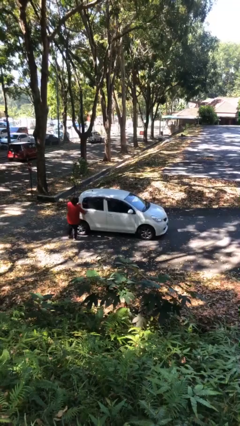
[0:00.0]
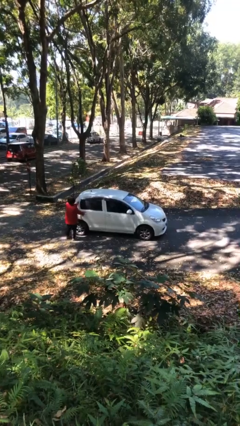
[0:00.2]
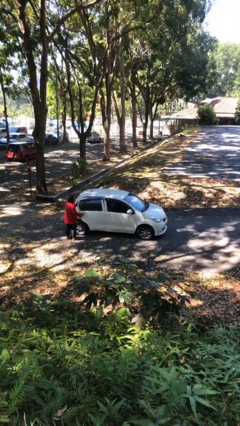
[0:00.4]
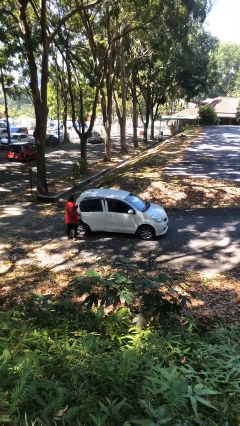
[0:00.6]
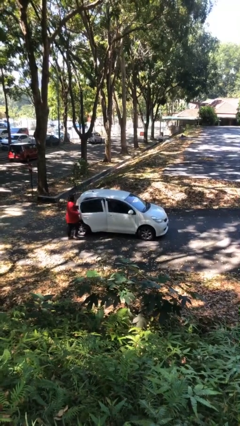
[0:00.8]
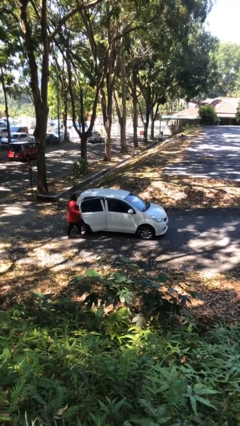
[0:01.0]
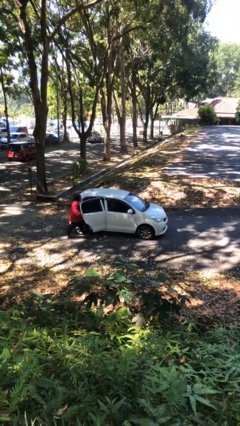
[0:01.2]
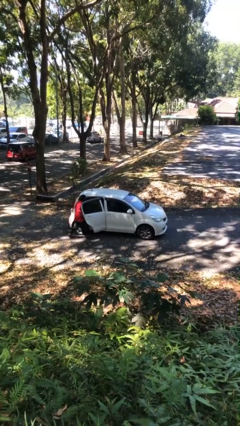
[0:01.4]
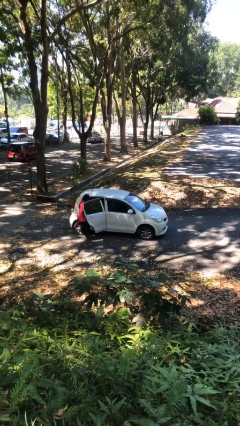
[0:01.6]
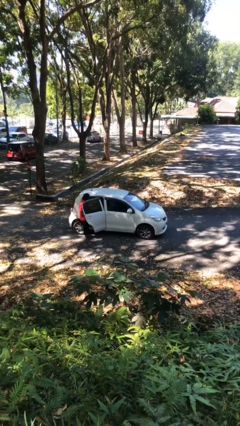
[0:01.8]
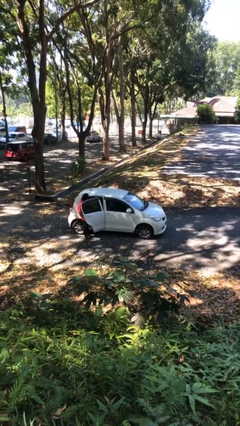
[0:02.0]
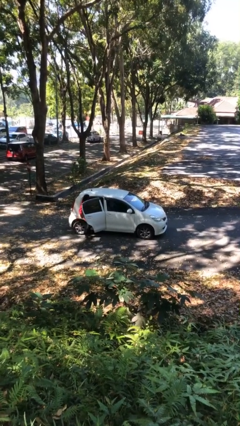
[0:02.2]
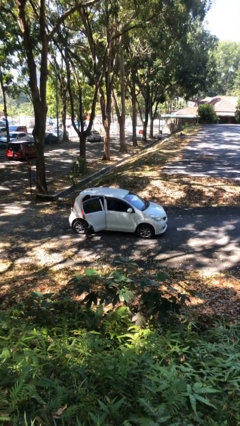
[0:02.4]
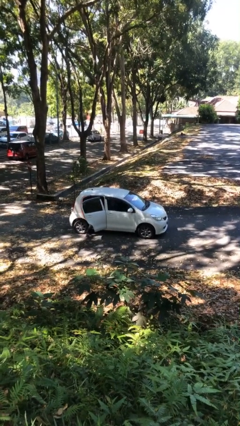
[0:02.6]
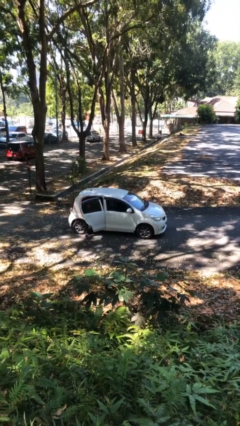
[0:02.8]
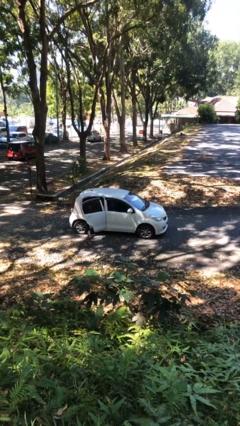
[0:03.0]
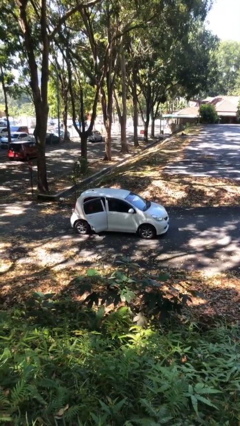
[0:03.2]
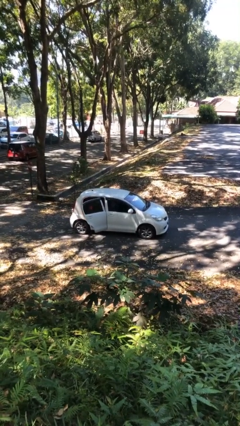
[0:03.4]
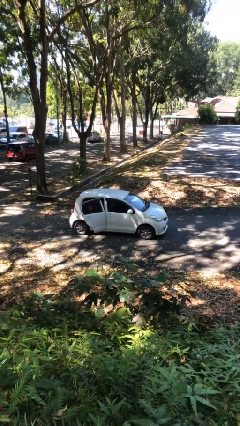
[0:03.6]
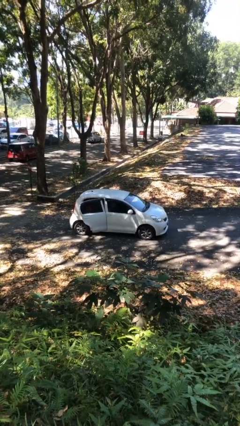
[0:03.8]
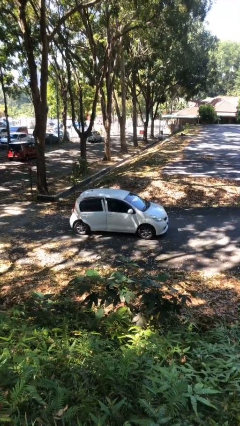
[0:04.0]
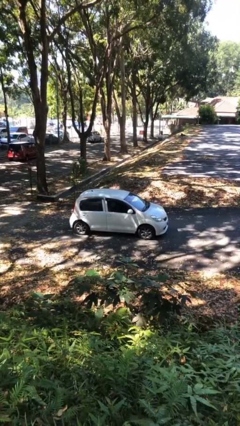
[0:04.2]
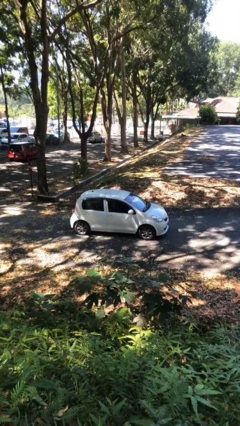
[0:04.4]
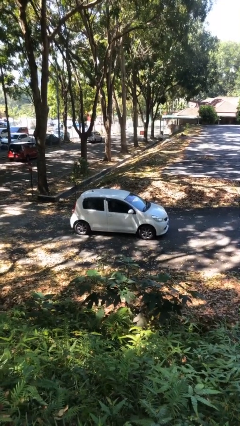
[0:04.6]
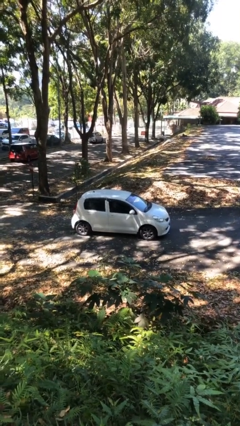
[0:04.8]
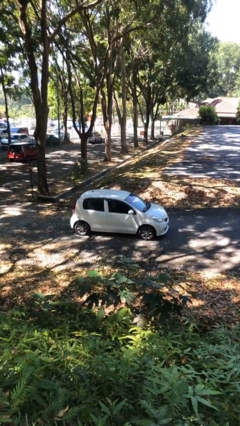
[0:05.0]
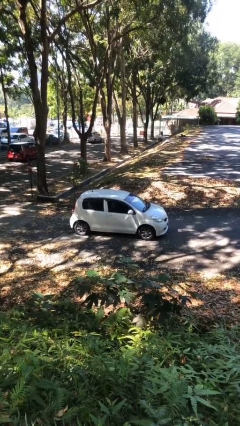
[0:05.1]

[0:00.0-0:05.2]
car picks up person

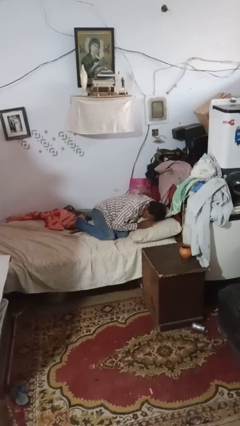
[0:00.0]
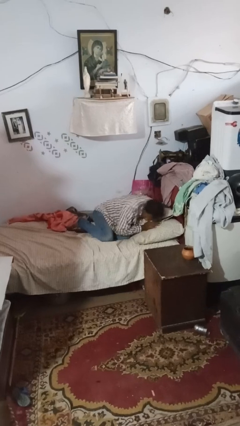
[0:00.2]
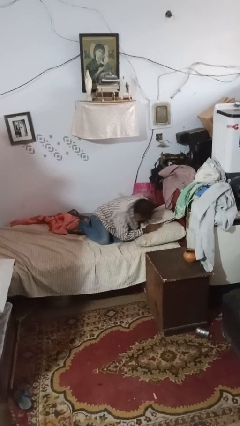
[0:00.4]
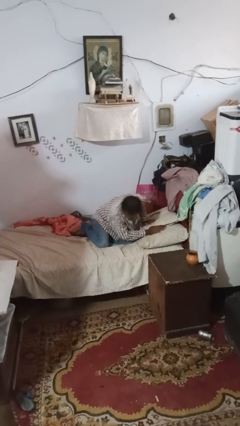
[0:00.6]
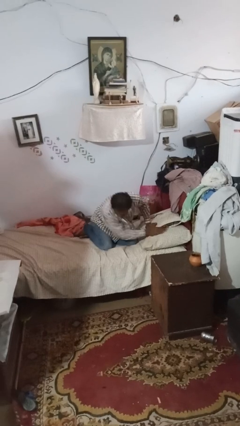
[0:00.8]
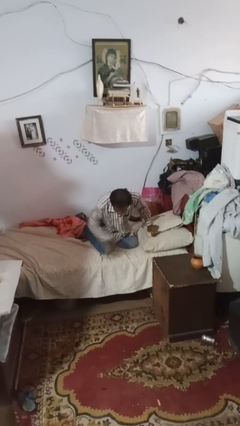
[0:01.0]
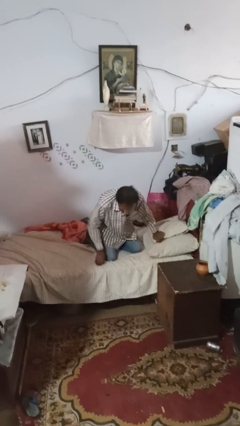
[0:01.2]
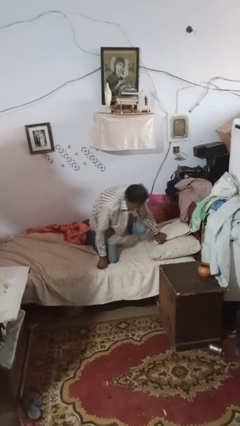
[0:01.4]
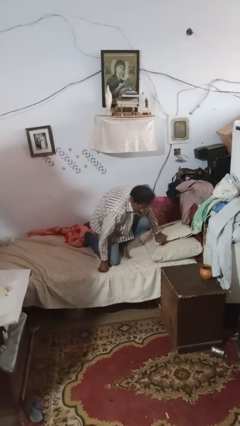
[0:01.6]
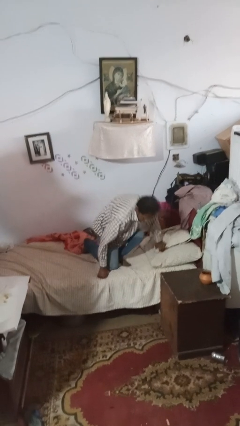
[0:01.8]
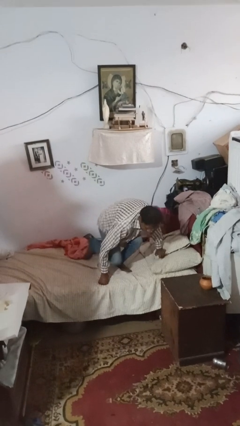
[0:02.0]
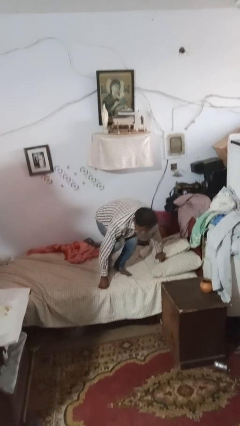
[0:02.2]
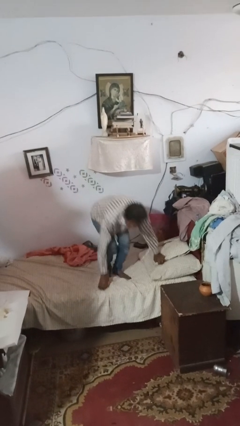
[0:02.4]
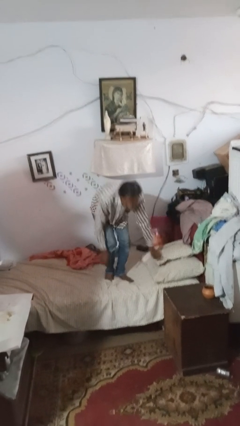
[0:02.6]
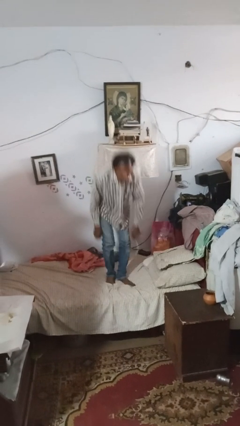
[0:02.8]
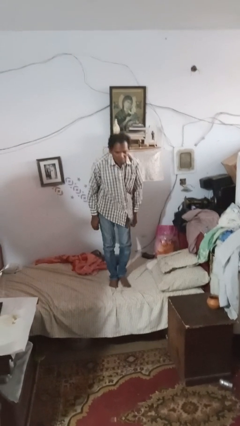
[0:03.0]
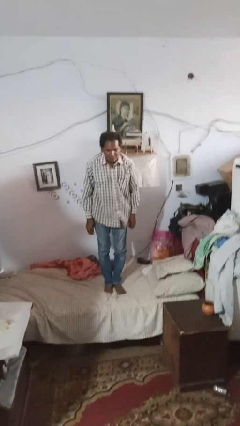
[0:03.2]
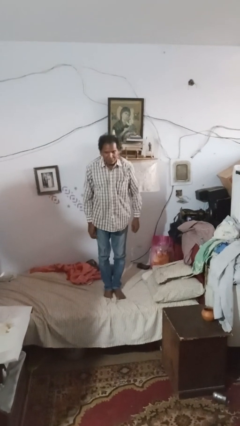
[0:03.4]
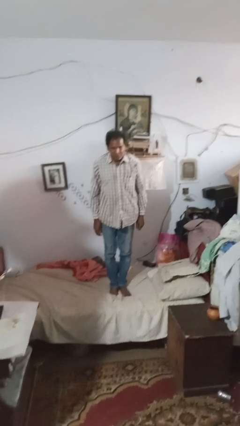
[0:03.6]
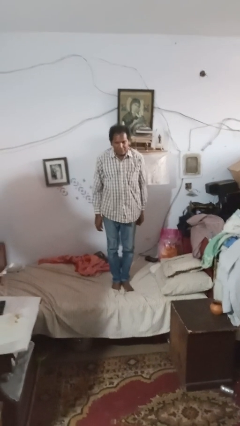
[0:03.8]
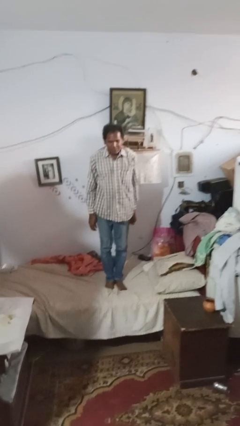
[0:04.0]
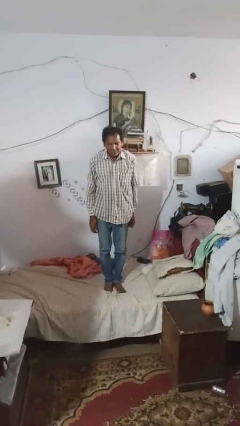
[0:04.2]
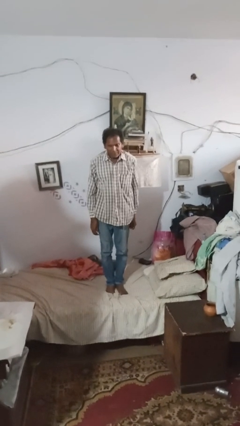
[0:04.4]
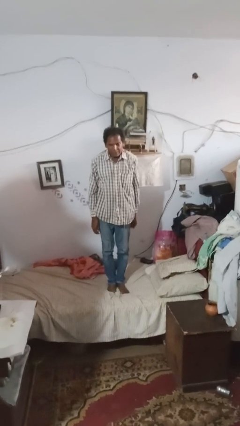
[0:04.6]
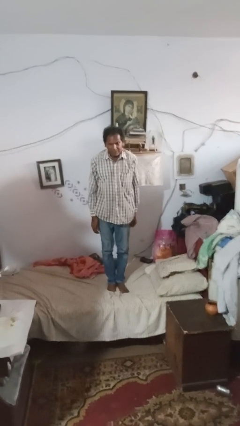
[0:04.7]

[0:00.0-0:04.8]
person stands up

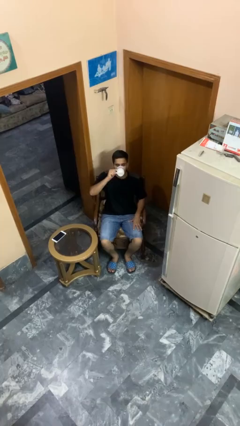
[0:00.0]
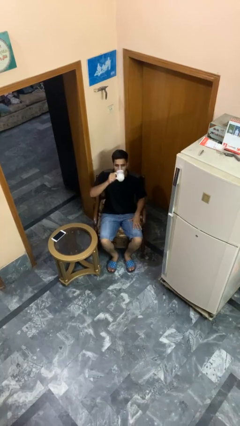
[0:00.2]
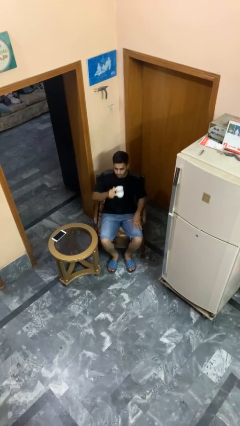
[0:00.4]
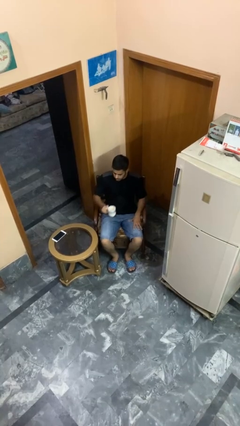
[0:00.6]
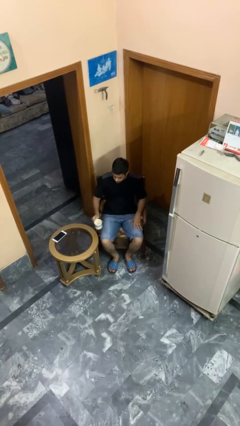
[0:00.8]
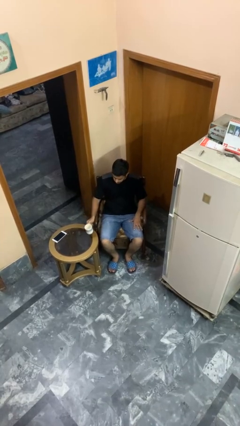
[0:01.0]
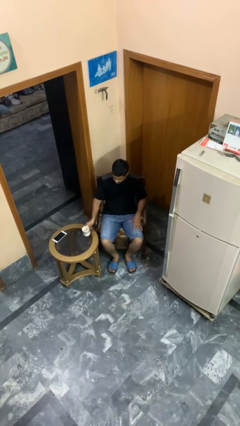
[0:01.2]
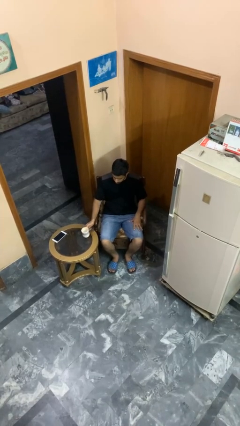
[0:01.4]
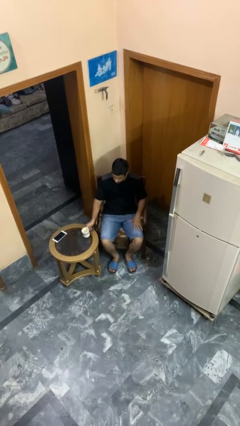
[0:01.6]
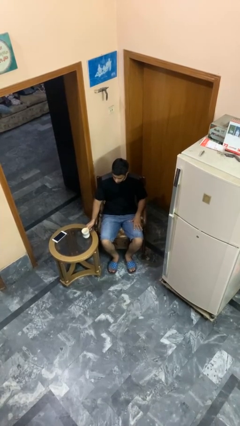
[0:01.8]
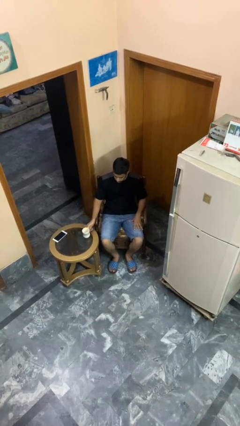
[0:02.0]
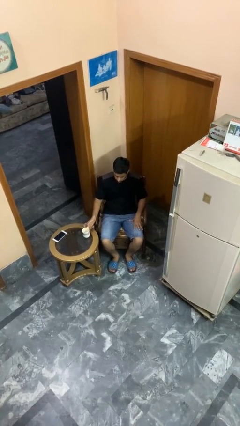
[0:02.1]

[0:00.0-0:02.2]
person puts down object on table

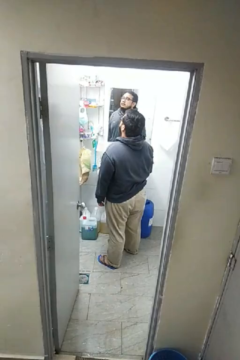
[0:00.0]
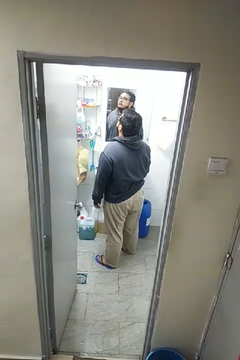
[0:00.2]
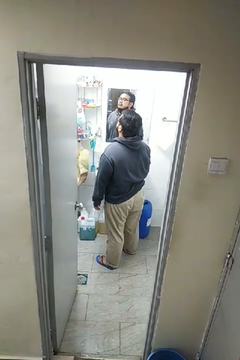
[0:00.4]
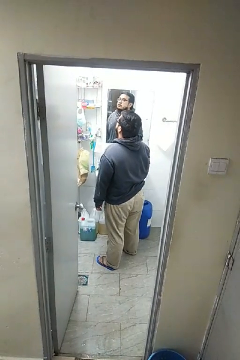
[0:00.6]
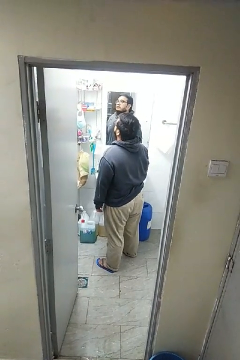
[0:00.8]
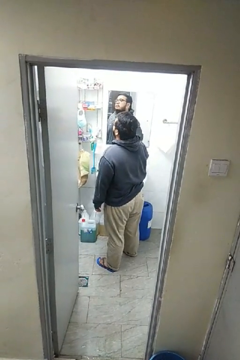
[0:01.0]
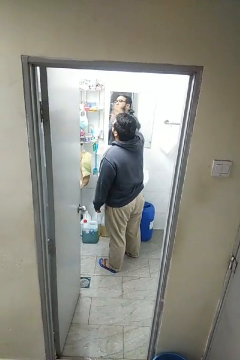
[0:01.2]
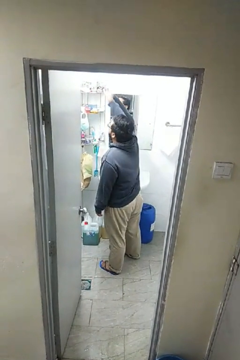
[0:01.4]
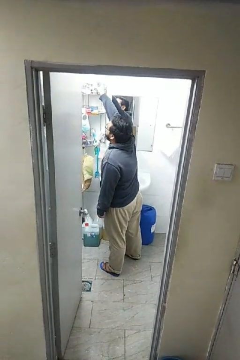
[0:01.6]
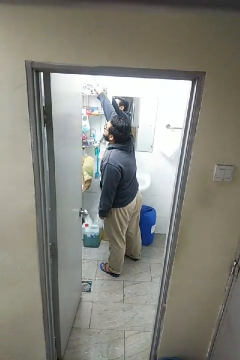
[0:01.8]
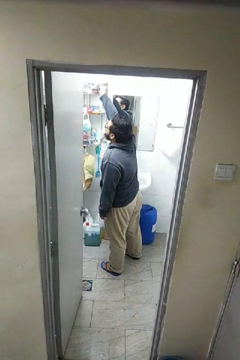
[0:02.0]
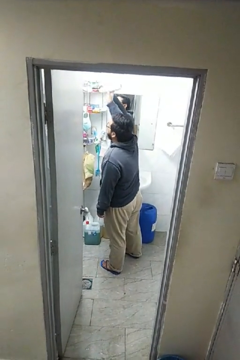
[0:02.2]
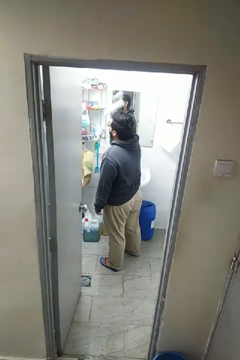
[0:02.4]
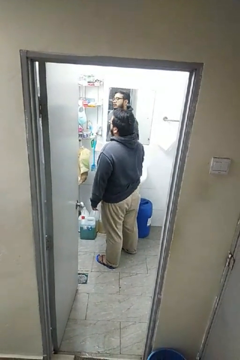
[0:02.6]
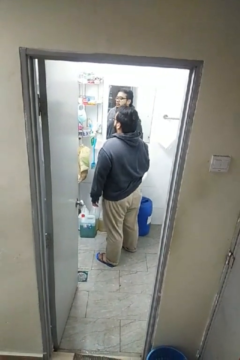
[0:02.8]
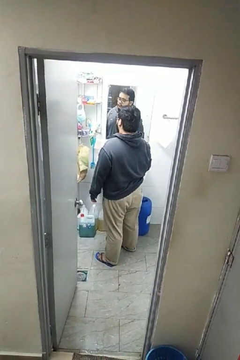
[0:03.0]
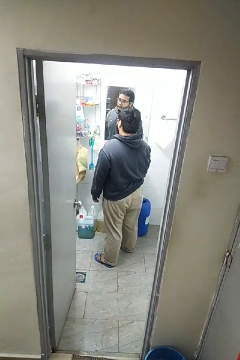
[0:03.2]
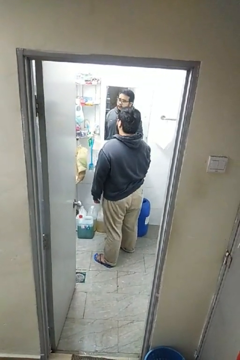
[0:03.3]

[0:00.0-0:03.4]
person picks up object from countertop

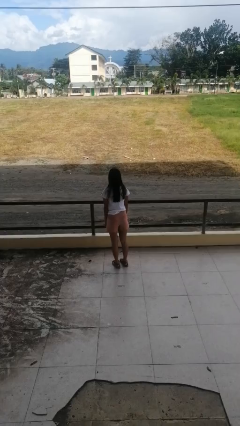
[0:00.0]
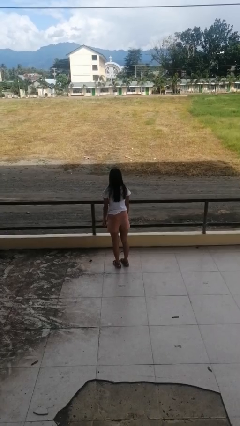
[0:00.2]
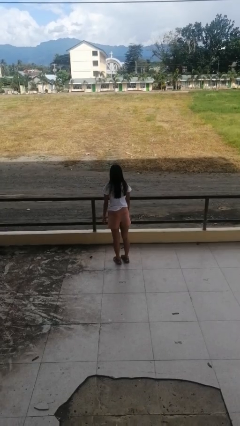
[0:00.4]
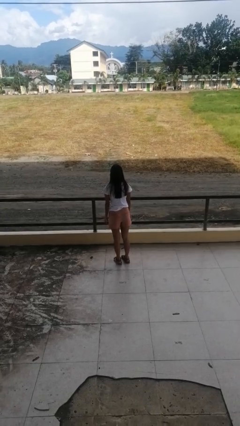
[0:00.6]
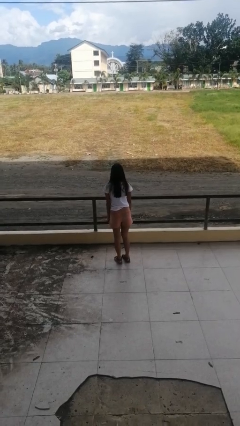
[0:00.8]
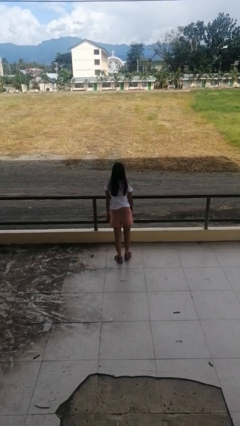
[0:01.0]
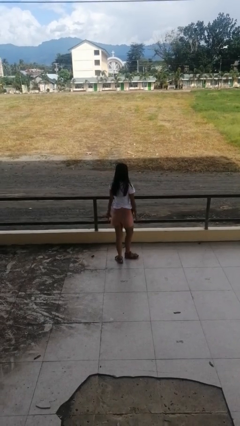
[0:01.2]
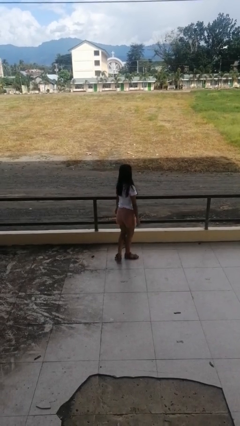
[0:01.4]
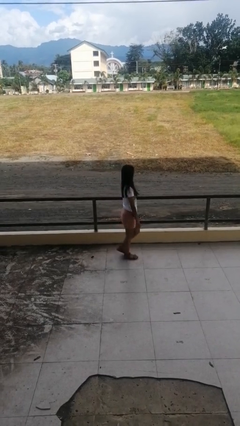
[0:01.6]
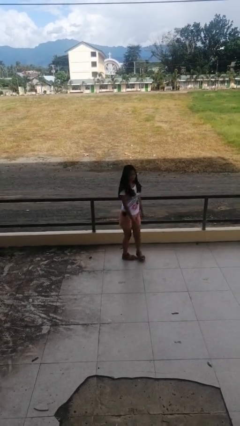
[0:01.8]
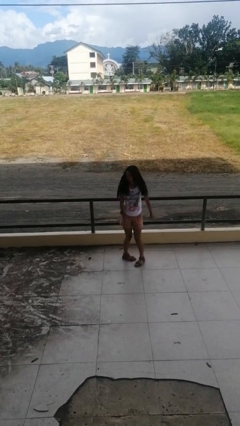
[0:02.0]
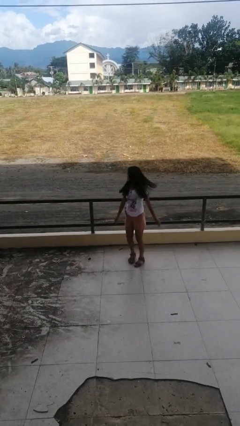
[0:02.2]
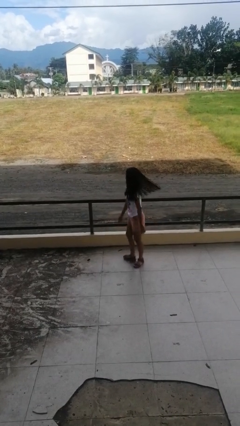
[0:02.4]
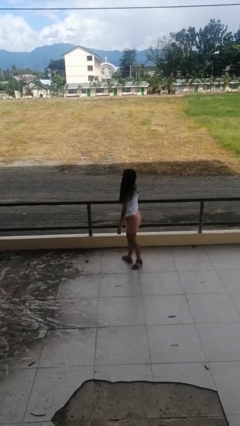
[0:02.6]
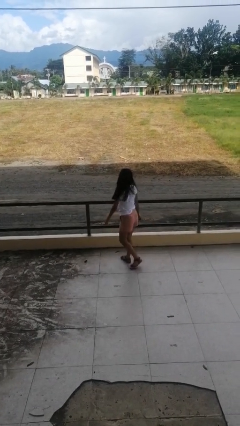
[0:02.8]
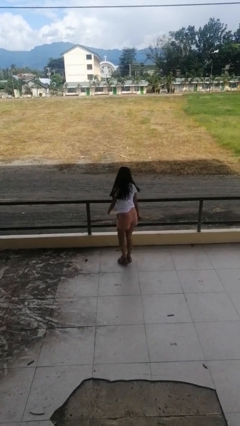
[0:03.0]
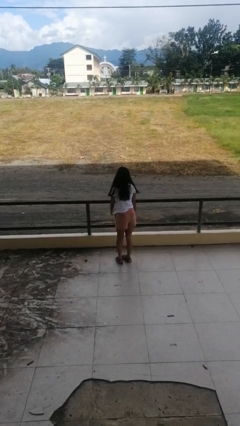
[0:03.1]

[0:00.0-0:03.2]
person twirls
